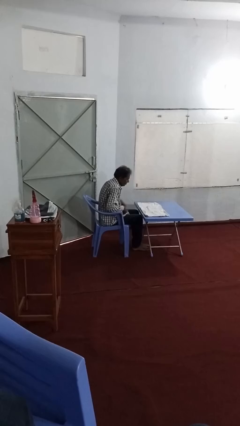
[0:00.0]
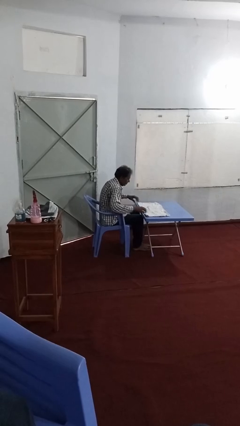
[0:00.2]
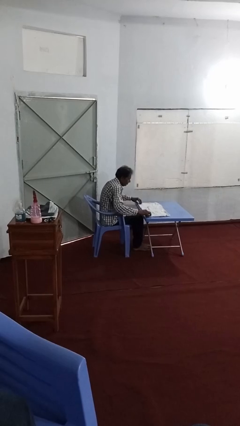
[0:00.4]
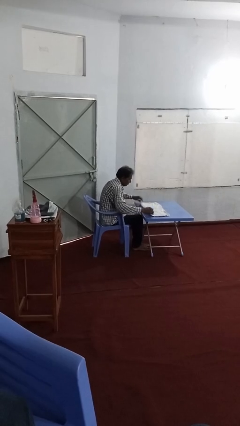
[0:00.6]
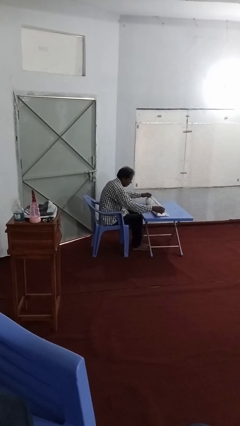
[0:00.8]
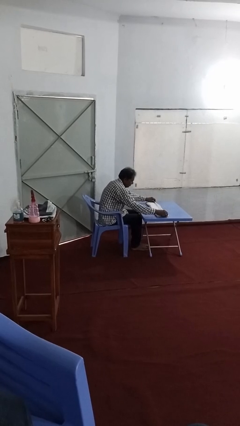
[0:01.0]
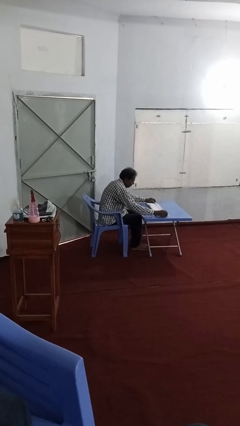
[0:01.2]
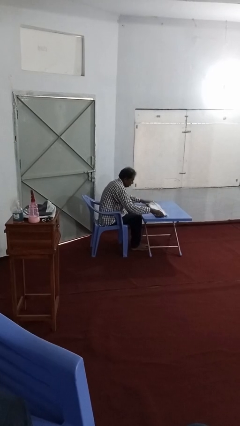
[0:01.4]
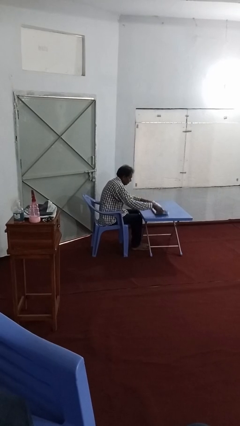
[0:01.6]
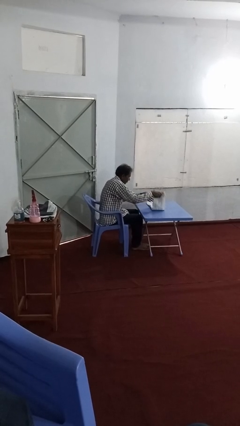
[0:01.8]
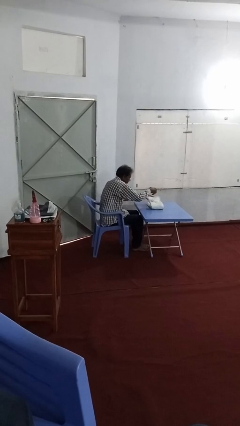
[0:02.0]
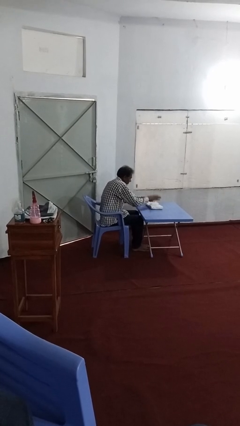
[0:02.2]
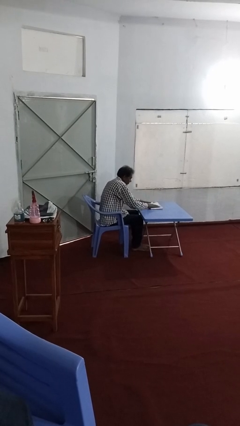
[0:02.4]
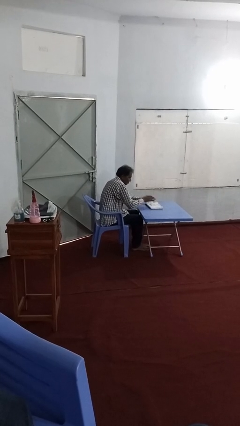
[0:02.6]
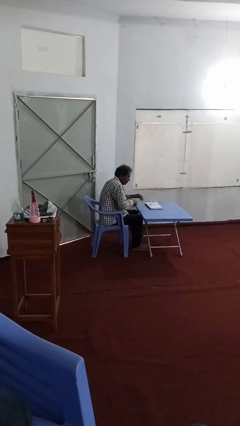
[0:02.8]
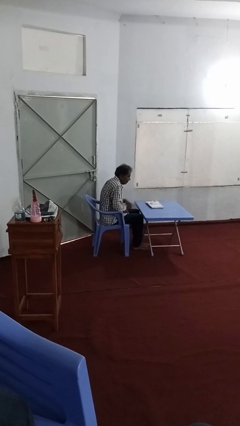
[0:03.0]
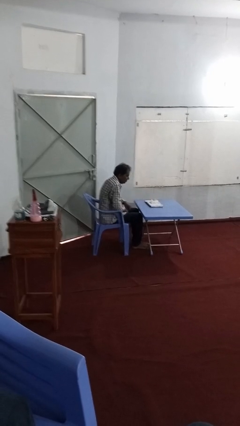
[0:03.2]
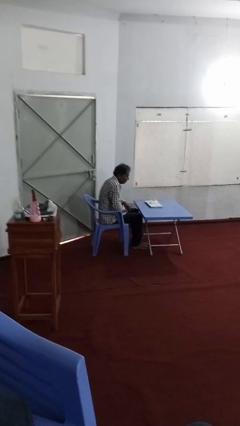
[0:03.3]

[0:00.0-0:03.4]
person folds towel

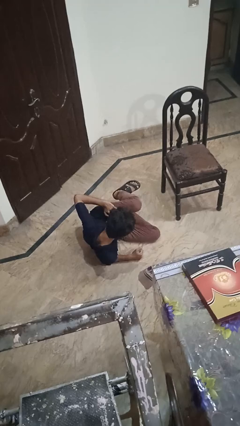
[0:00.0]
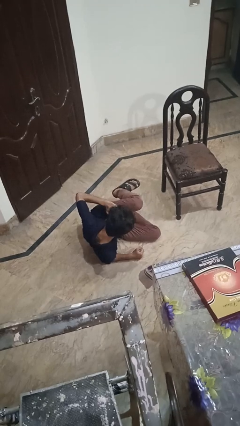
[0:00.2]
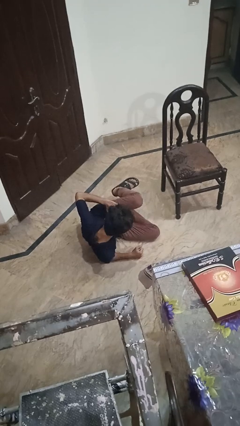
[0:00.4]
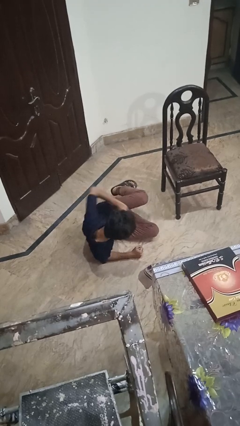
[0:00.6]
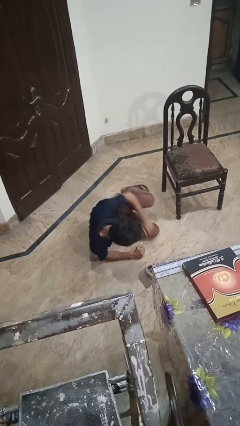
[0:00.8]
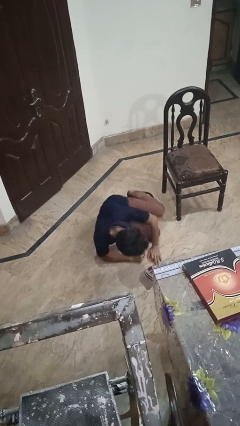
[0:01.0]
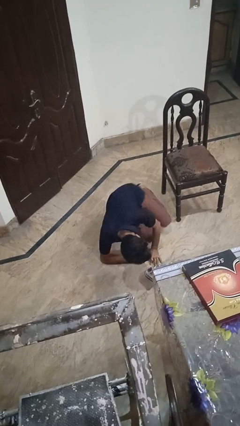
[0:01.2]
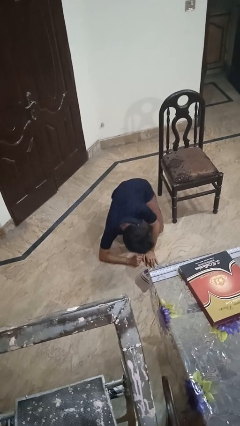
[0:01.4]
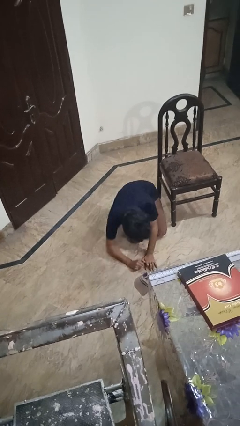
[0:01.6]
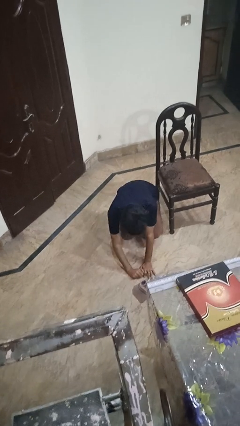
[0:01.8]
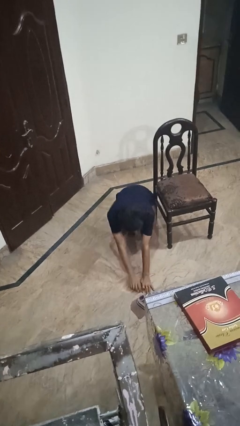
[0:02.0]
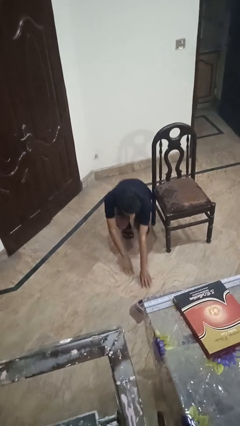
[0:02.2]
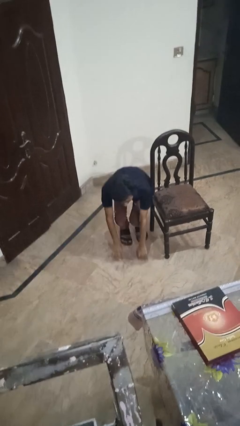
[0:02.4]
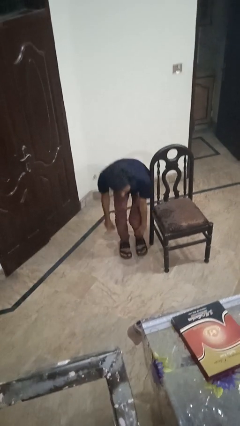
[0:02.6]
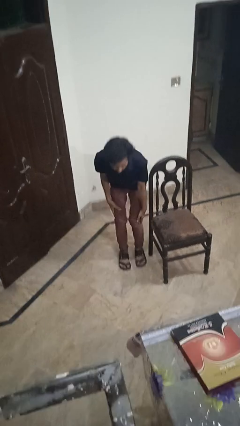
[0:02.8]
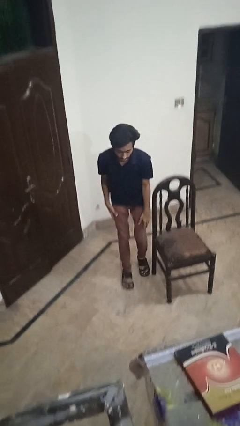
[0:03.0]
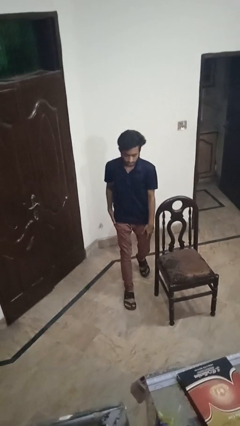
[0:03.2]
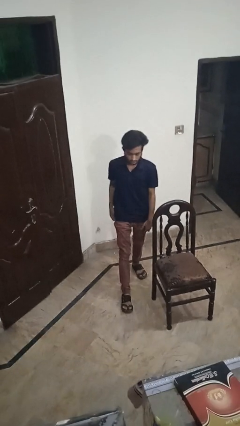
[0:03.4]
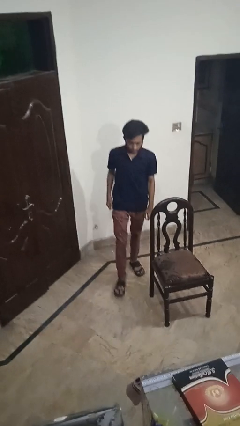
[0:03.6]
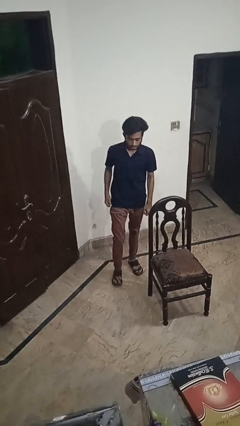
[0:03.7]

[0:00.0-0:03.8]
person stands up from floor

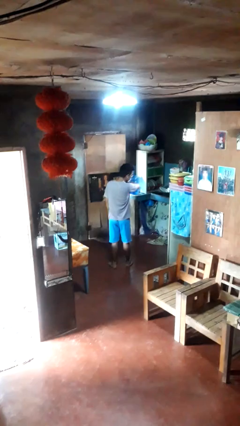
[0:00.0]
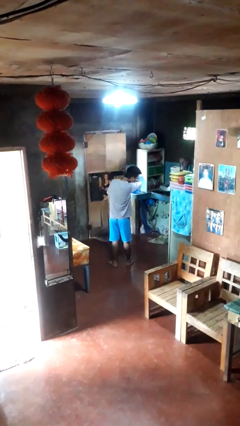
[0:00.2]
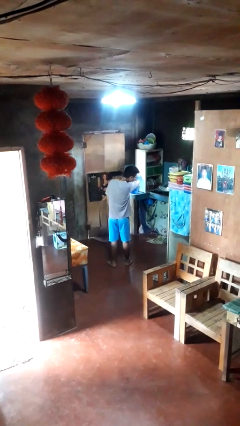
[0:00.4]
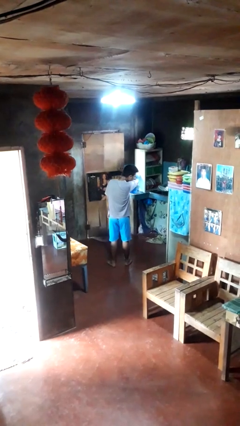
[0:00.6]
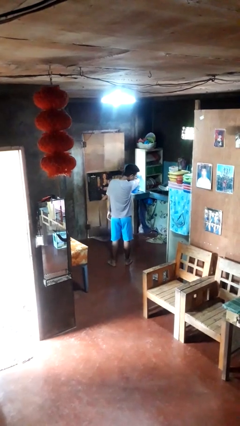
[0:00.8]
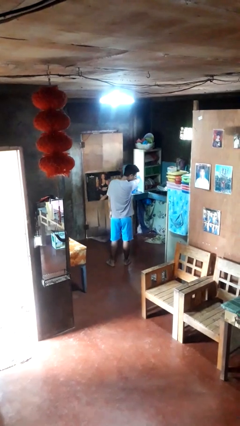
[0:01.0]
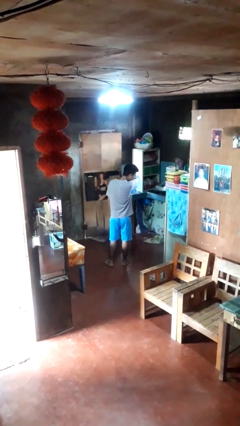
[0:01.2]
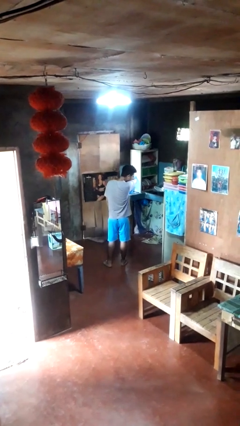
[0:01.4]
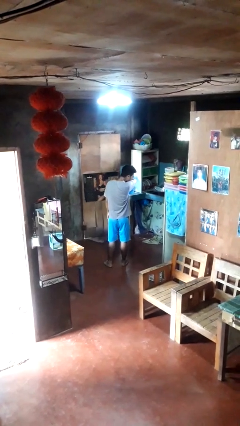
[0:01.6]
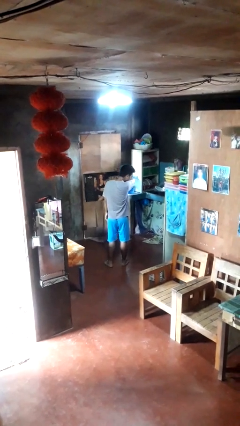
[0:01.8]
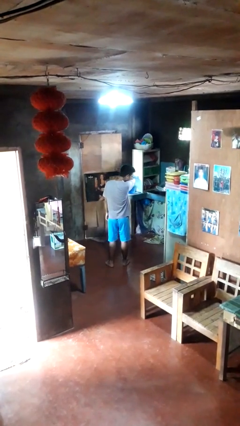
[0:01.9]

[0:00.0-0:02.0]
person sneezes into arm

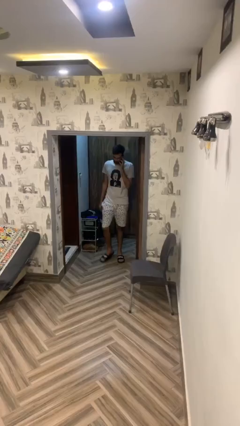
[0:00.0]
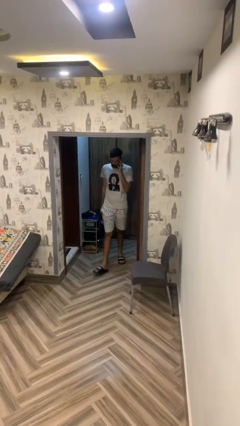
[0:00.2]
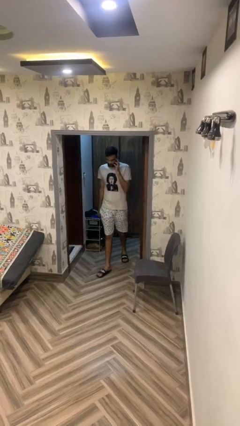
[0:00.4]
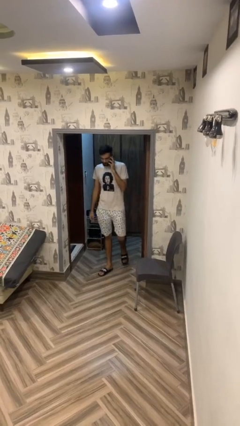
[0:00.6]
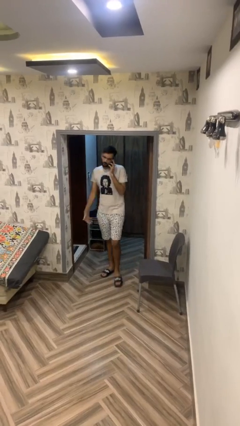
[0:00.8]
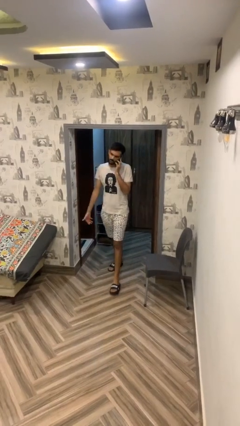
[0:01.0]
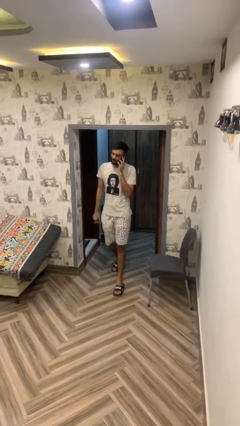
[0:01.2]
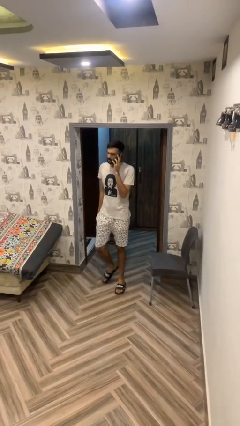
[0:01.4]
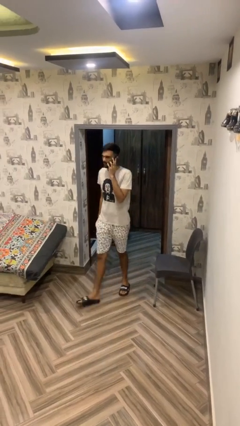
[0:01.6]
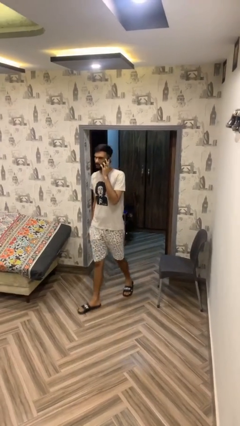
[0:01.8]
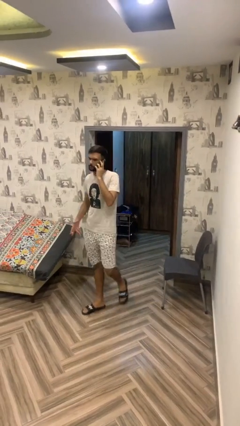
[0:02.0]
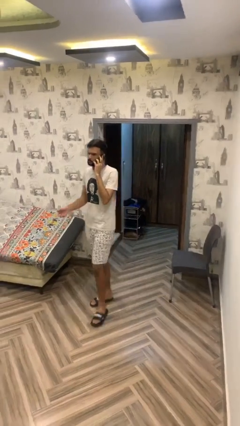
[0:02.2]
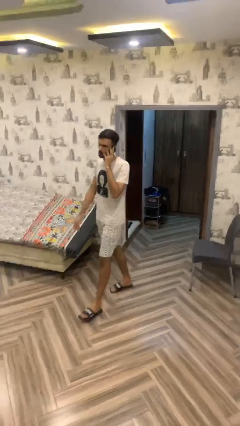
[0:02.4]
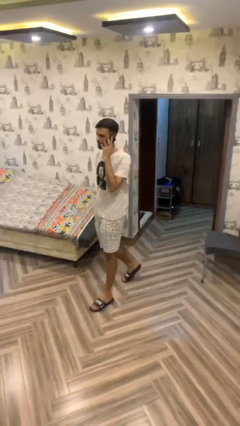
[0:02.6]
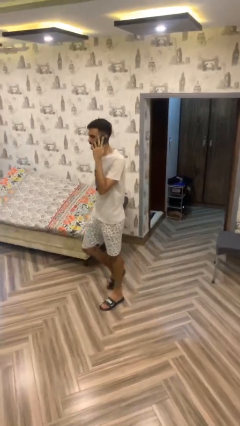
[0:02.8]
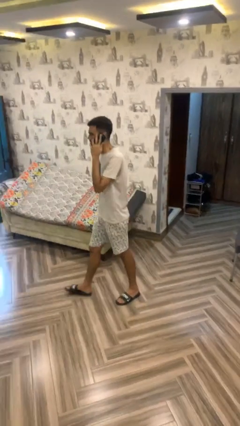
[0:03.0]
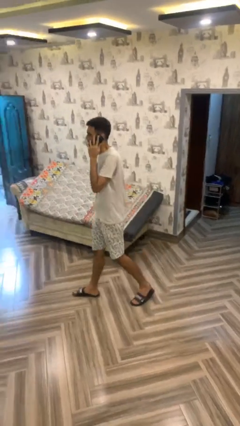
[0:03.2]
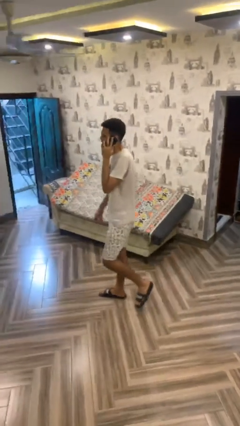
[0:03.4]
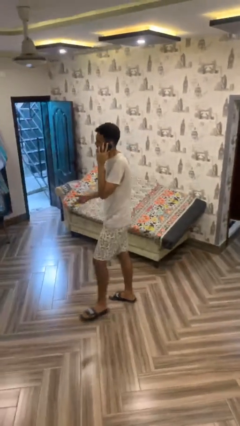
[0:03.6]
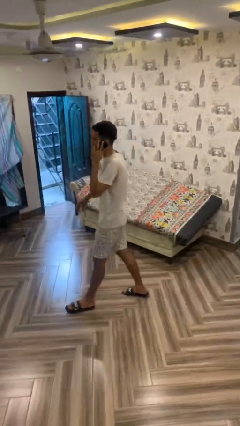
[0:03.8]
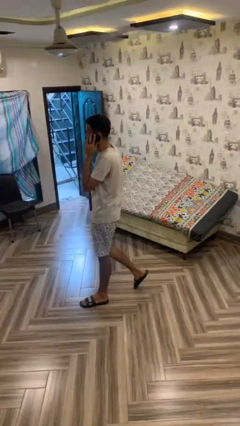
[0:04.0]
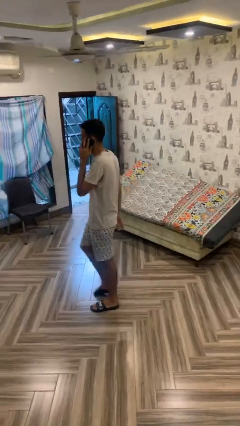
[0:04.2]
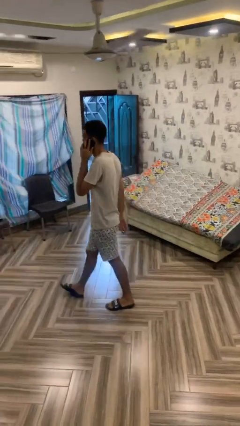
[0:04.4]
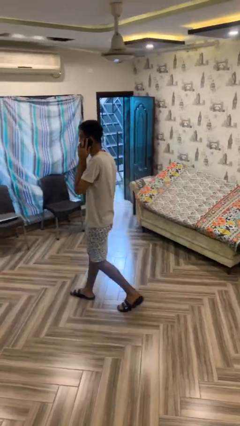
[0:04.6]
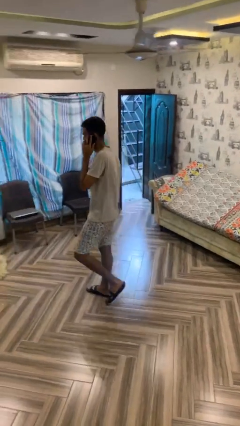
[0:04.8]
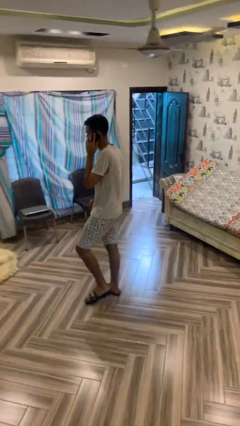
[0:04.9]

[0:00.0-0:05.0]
person enters scene through structure

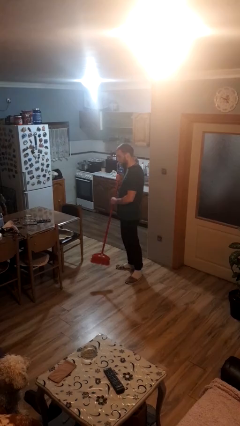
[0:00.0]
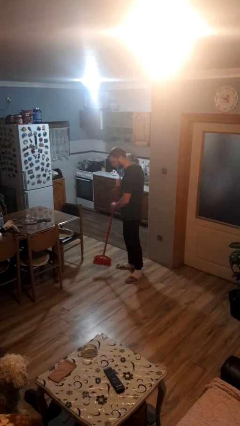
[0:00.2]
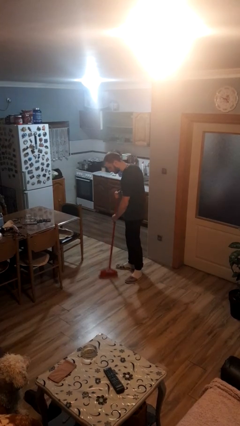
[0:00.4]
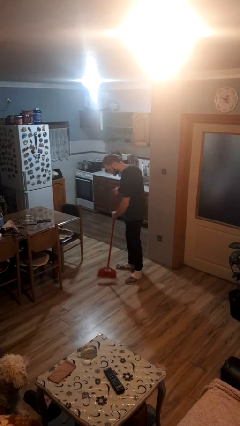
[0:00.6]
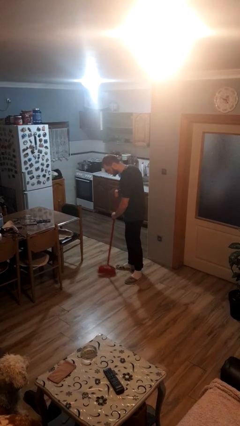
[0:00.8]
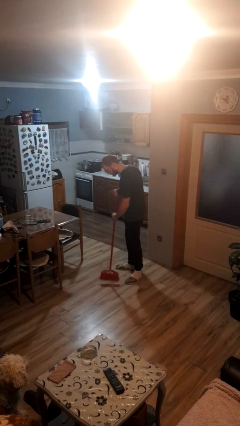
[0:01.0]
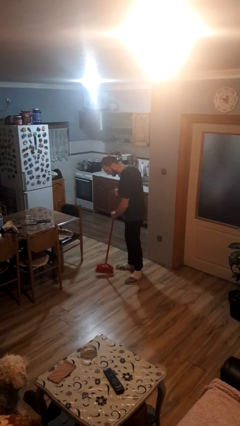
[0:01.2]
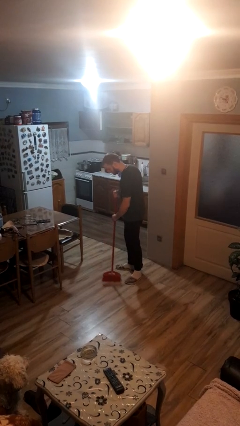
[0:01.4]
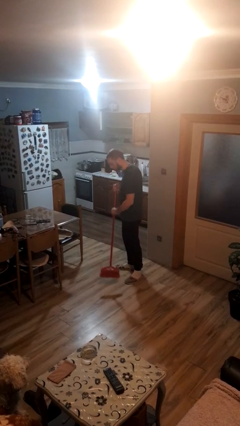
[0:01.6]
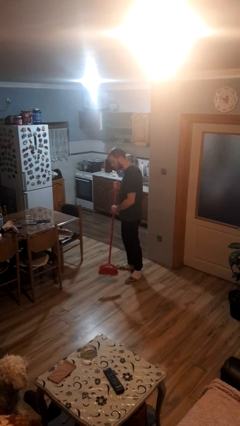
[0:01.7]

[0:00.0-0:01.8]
person sweeps floor

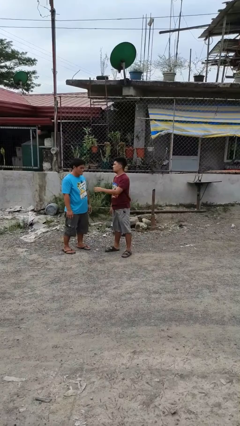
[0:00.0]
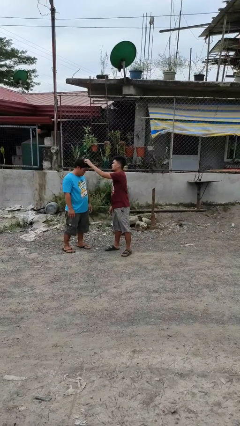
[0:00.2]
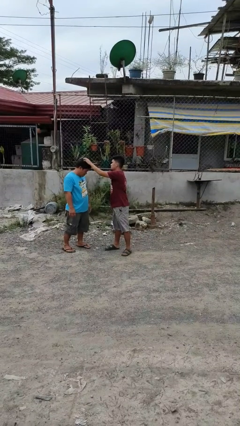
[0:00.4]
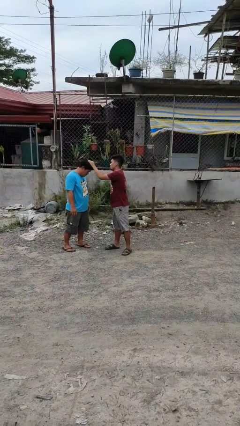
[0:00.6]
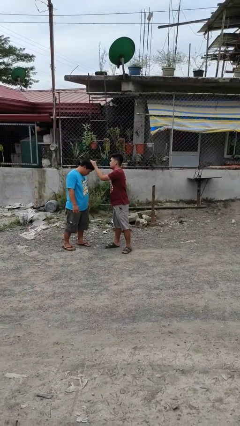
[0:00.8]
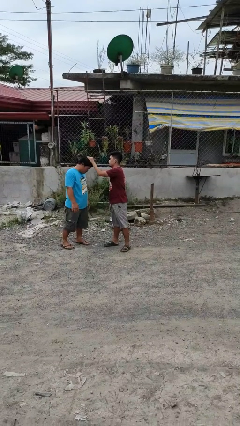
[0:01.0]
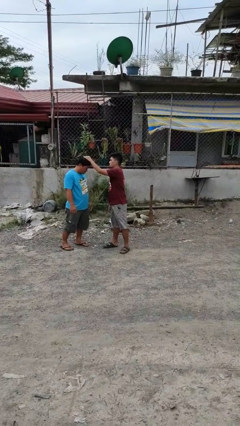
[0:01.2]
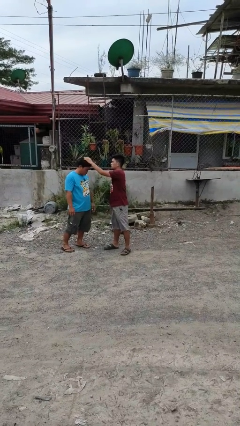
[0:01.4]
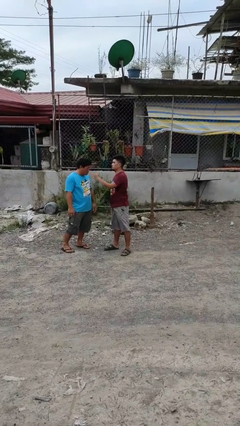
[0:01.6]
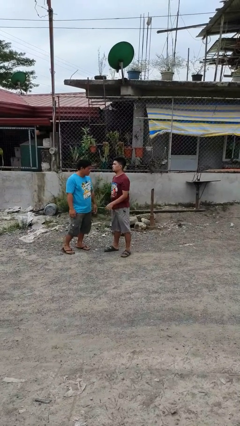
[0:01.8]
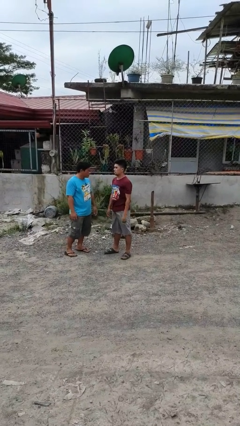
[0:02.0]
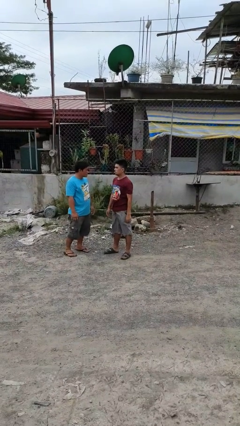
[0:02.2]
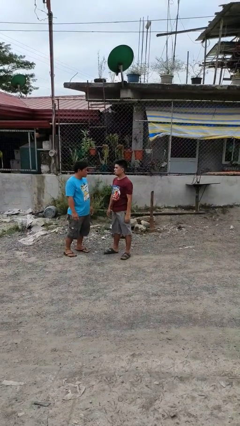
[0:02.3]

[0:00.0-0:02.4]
person grabs person by hair
